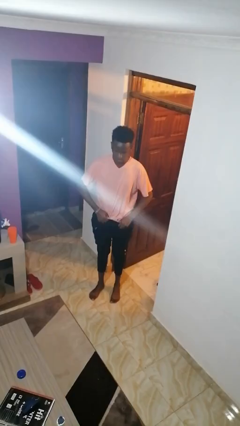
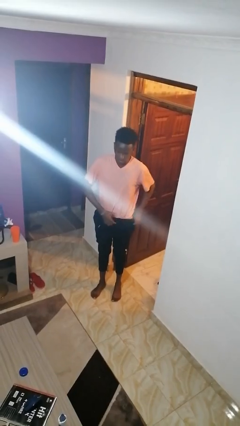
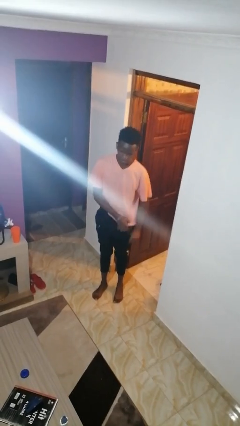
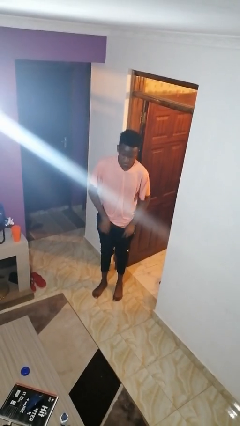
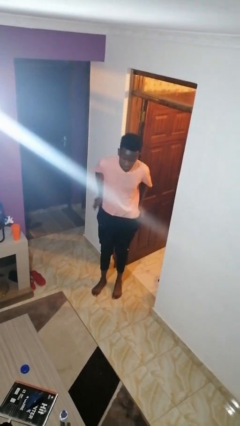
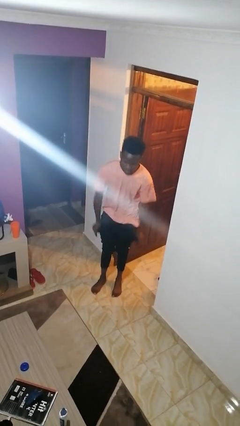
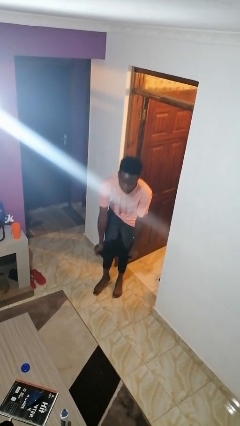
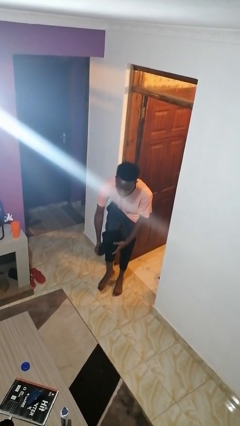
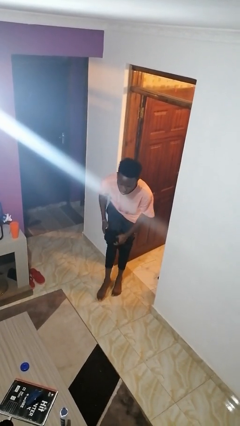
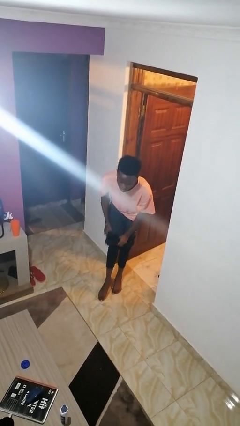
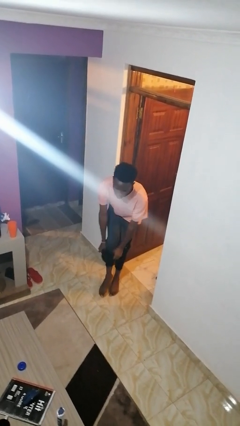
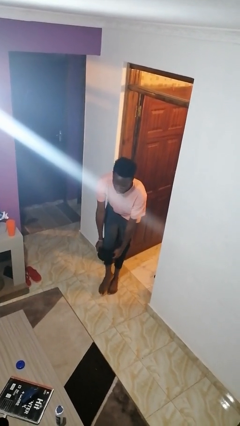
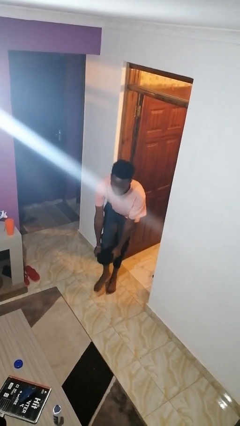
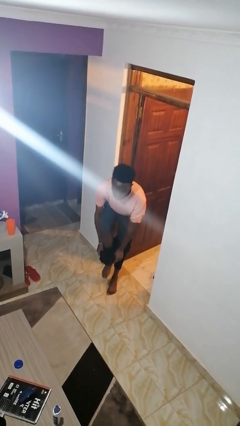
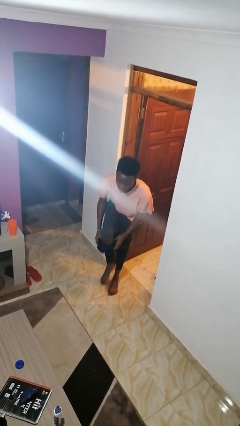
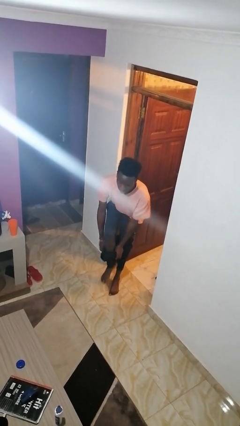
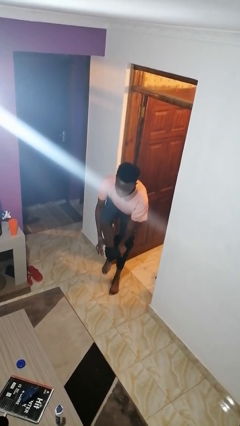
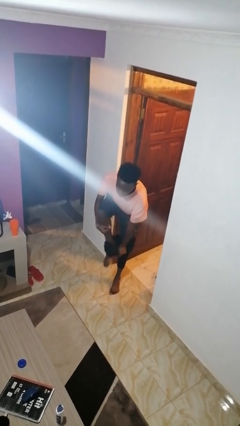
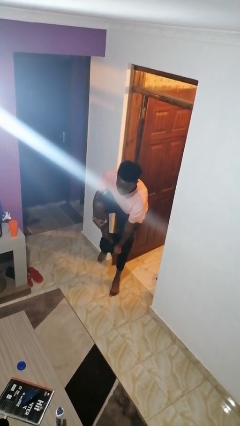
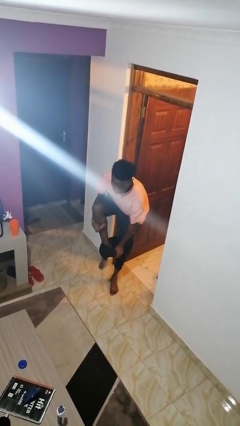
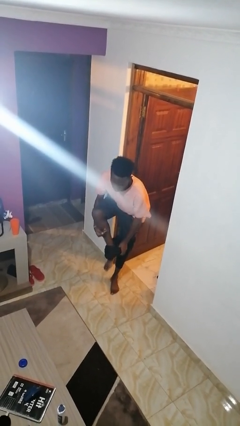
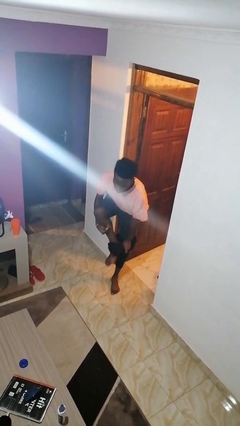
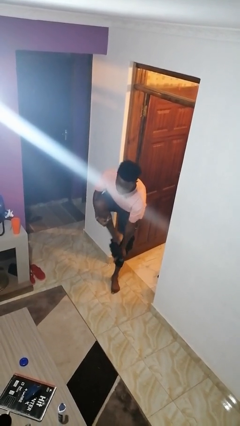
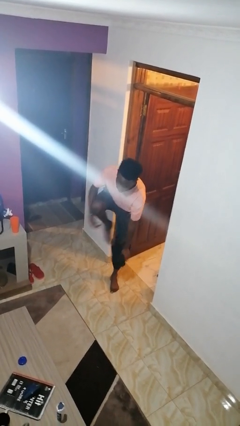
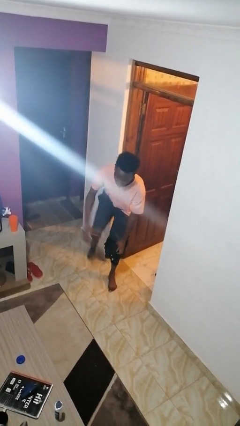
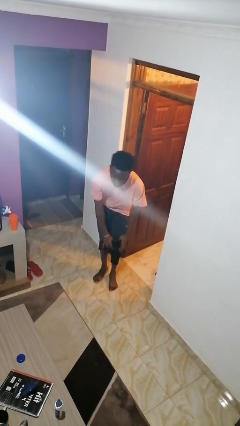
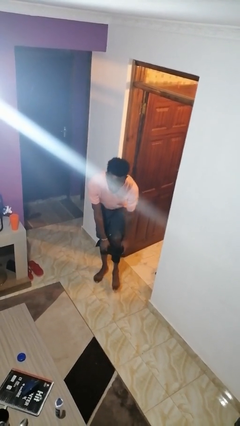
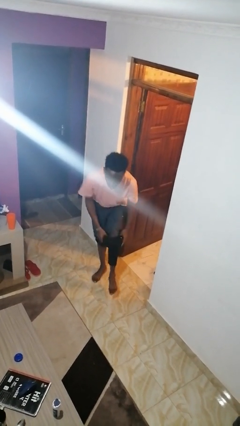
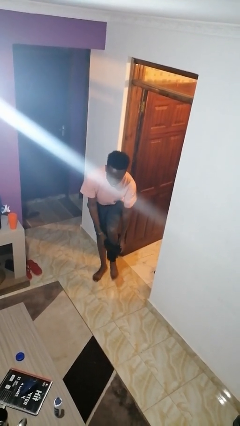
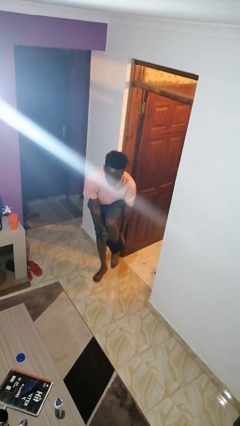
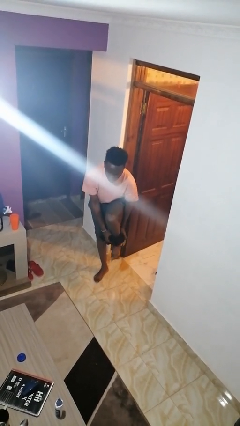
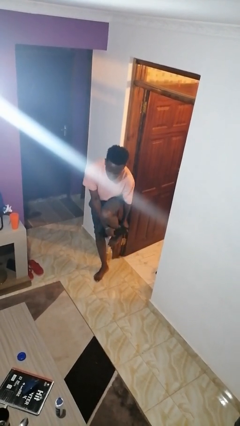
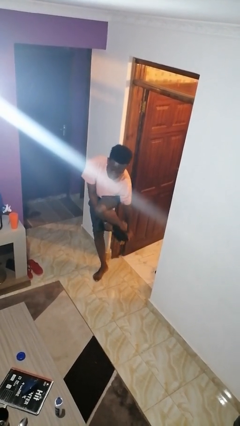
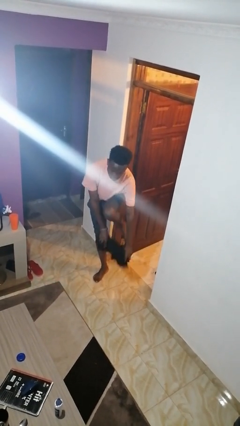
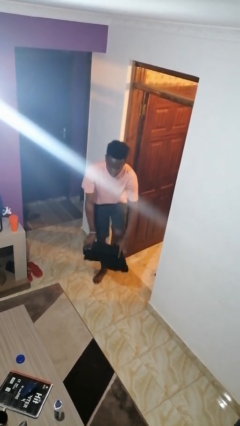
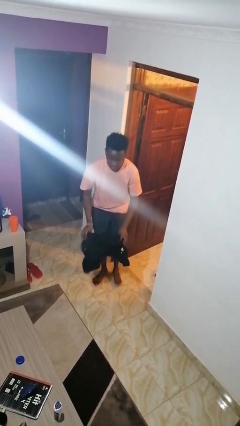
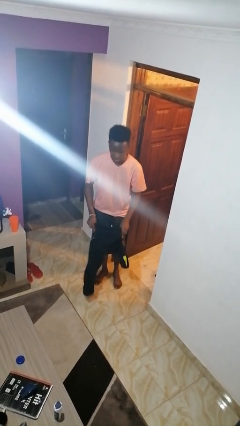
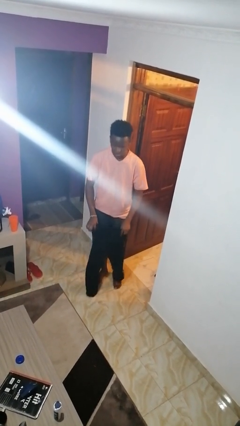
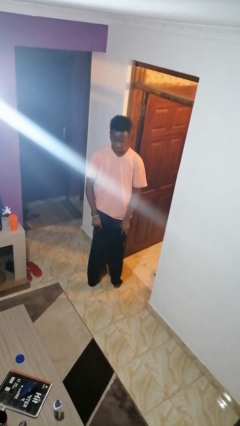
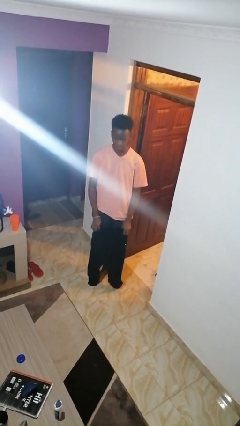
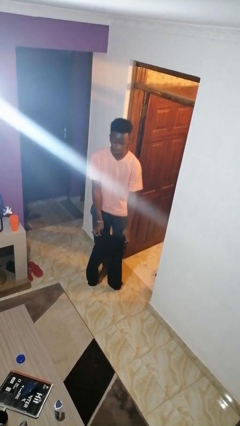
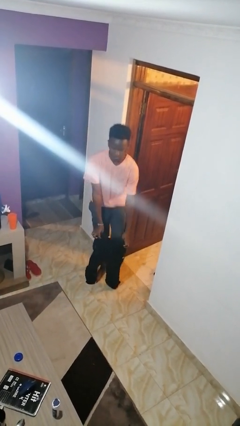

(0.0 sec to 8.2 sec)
person takes off pants

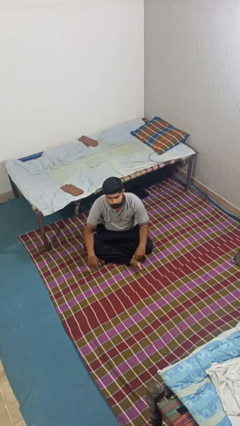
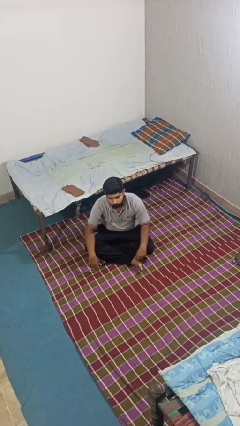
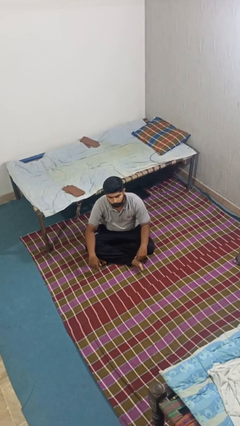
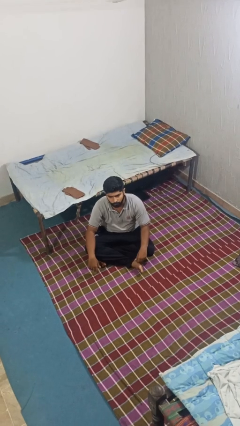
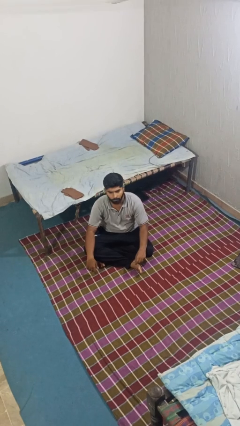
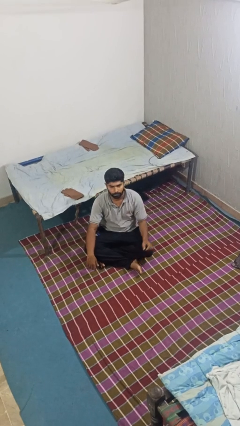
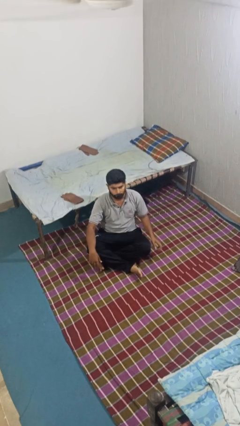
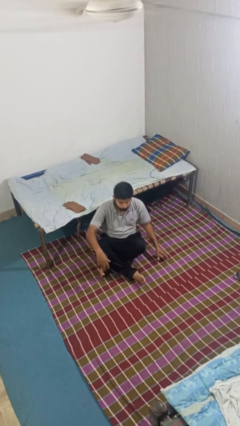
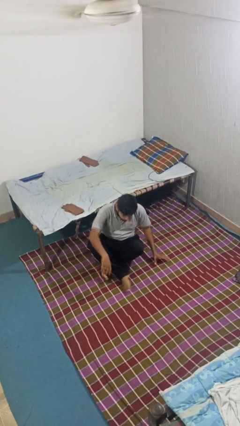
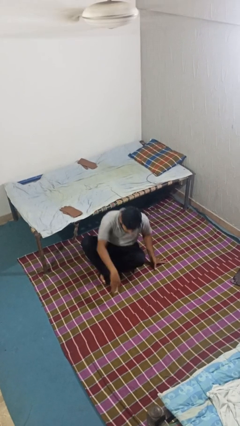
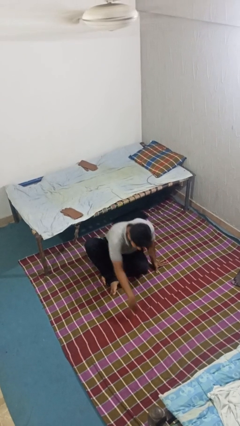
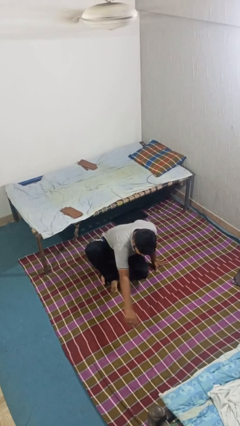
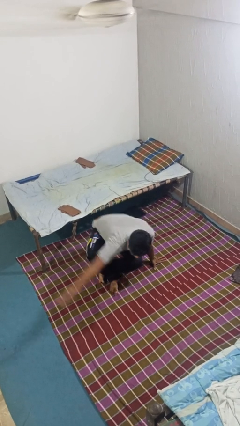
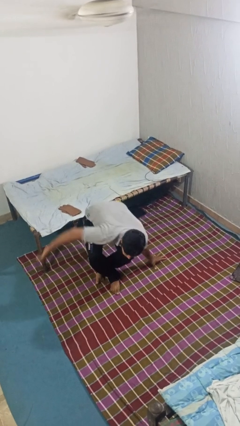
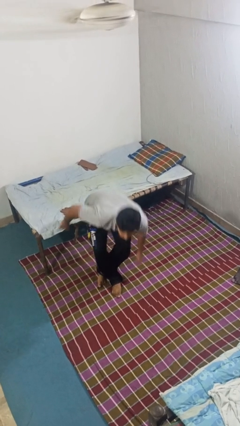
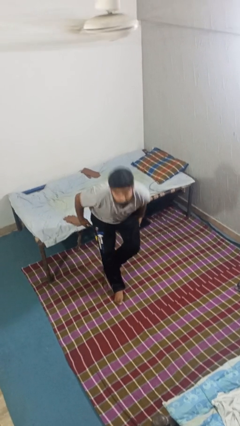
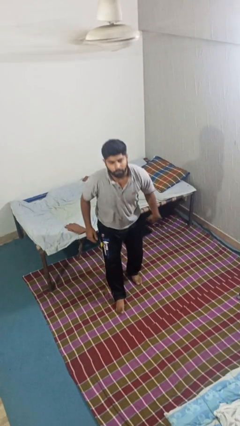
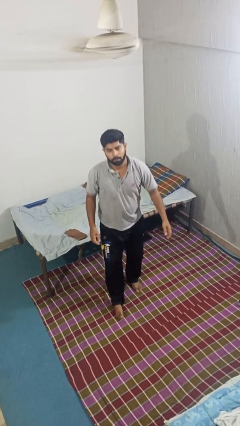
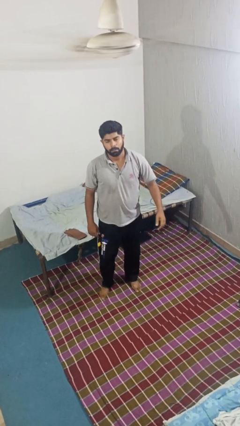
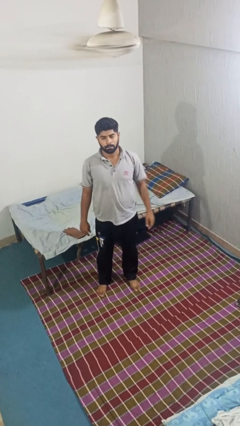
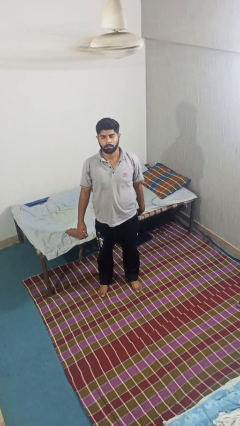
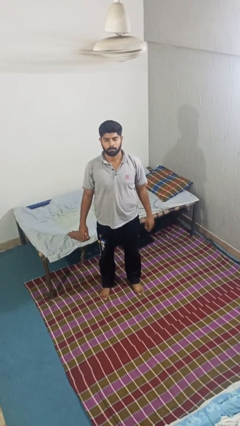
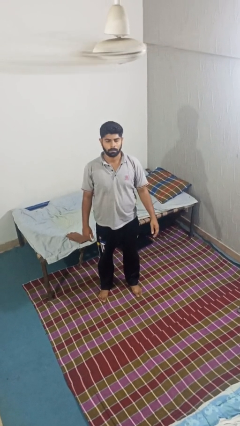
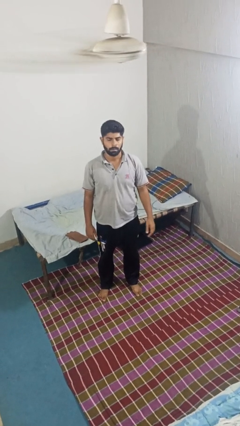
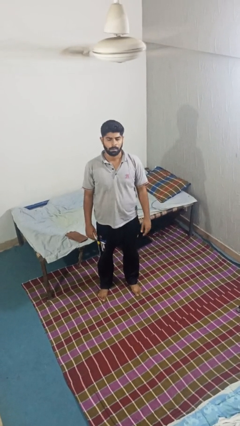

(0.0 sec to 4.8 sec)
person stands up from floor

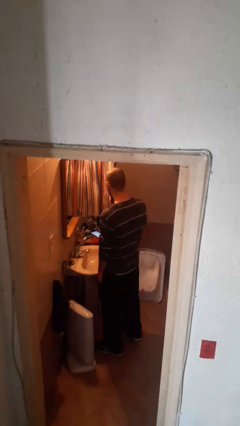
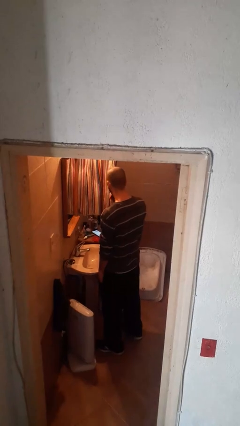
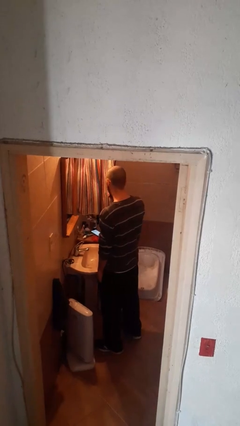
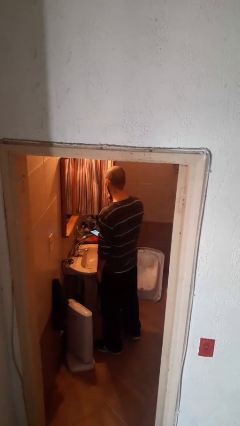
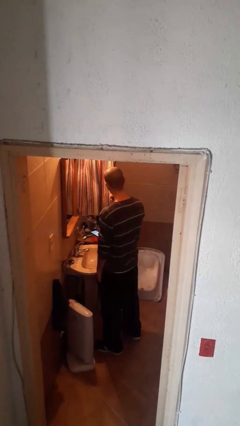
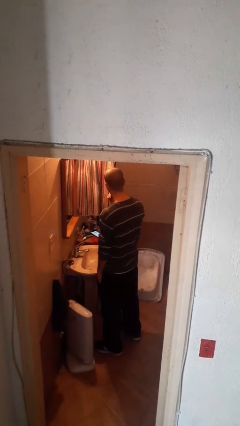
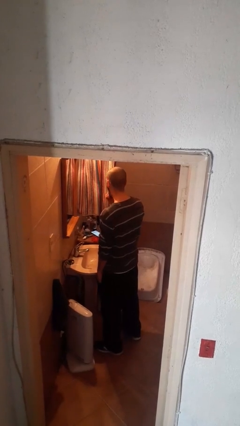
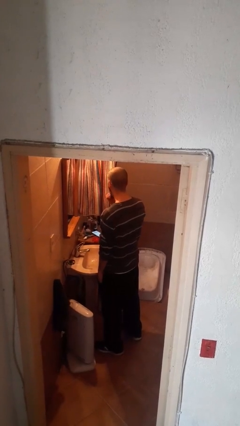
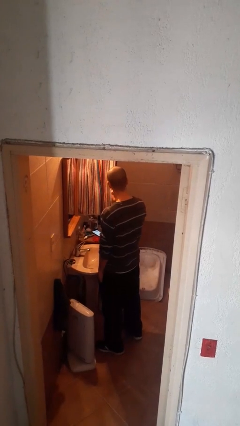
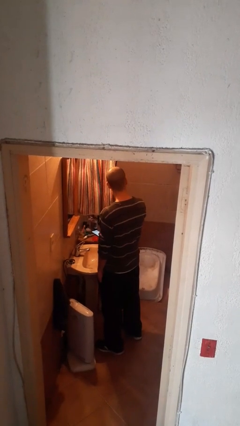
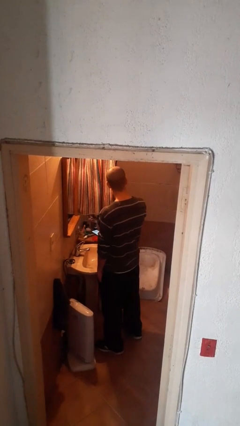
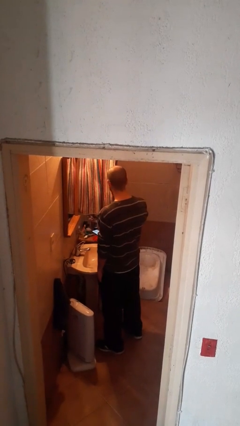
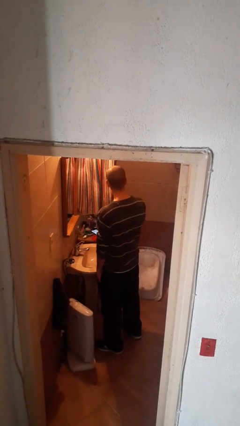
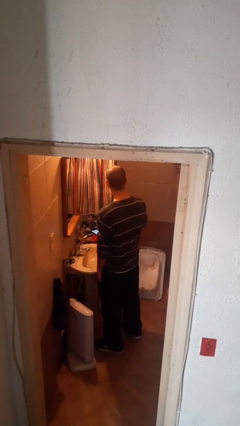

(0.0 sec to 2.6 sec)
person brushes teeth

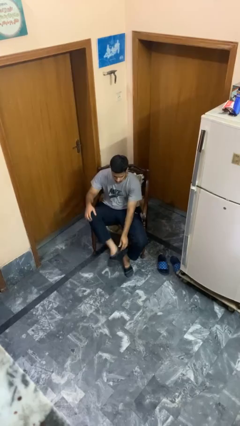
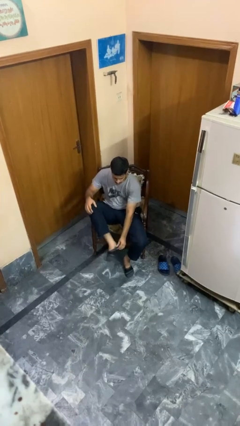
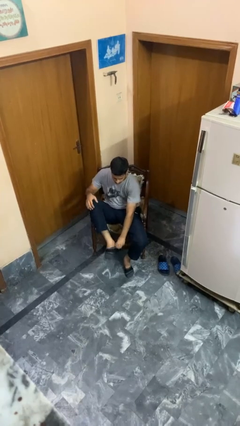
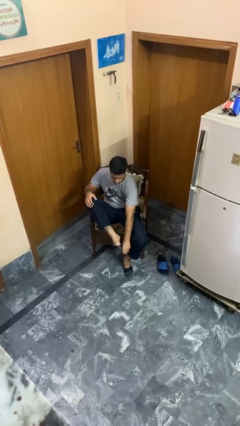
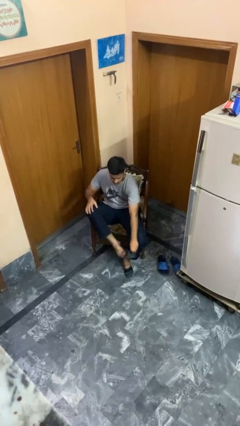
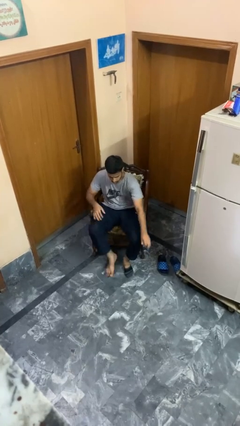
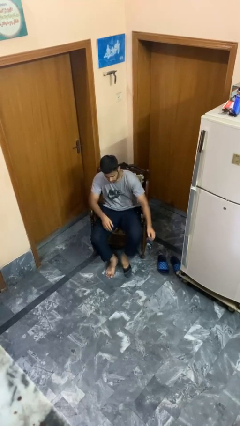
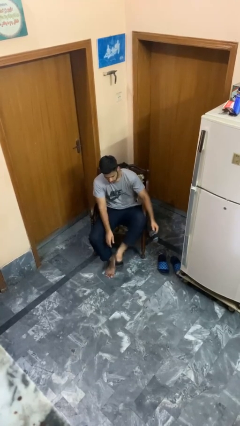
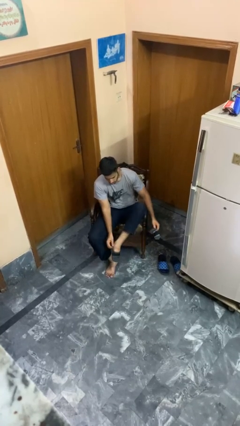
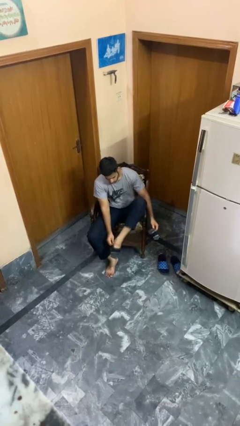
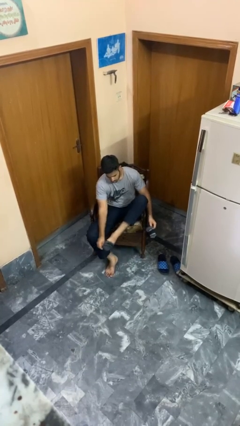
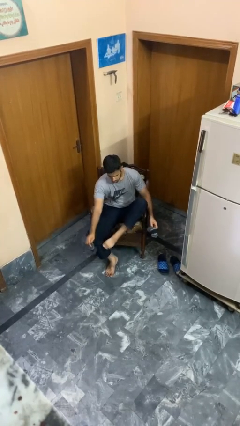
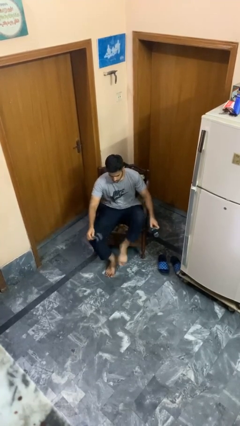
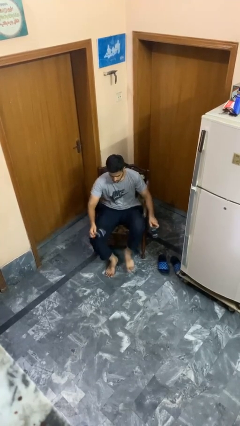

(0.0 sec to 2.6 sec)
person takes off socks
